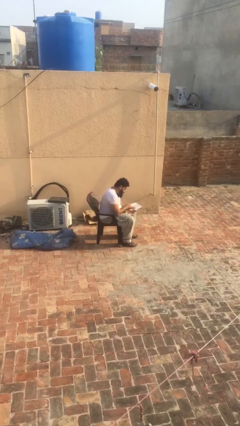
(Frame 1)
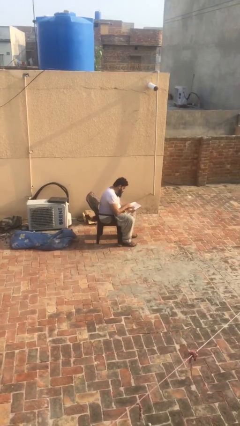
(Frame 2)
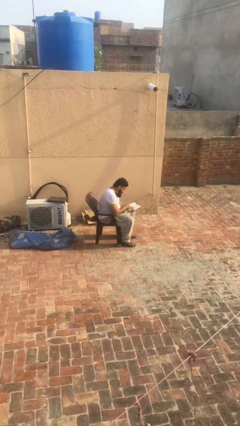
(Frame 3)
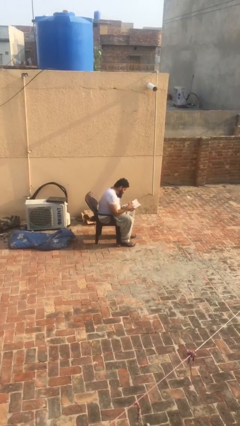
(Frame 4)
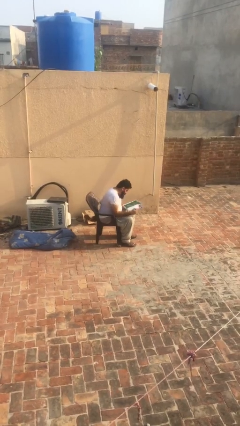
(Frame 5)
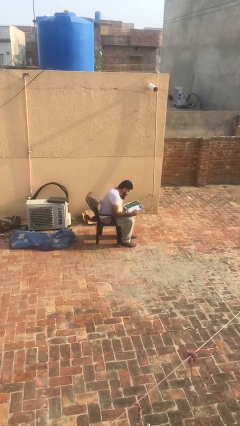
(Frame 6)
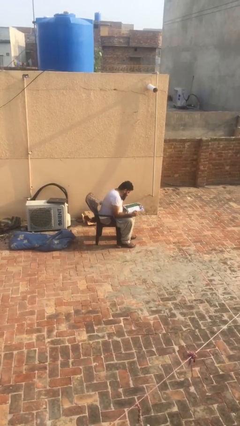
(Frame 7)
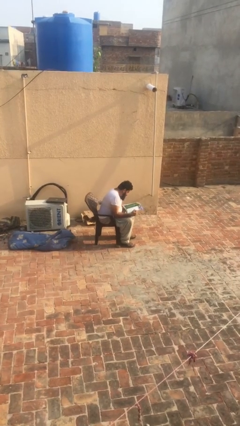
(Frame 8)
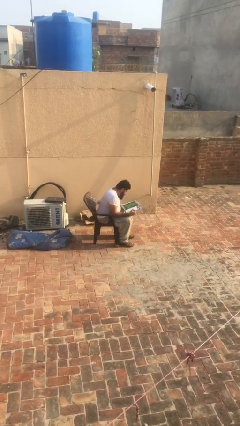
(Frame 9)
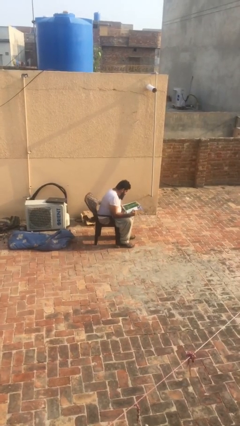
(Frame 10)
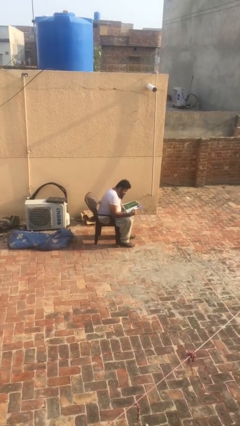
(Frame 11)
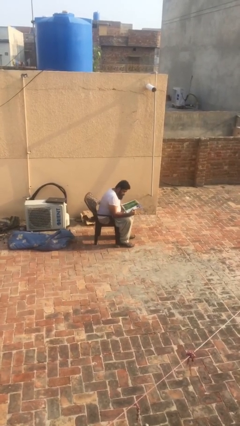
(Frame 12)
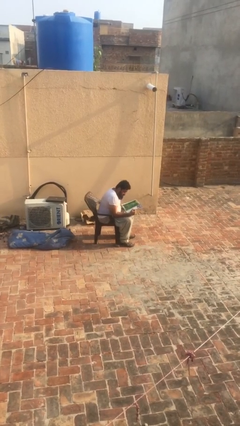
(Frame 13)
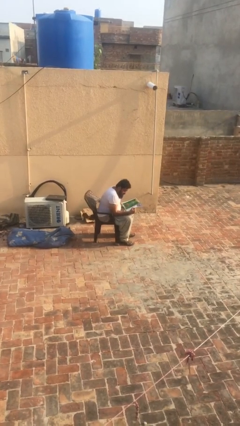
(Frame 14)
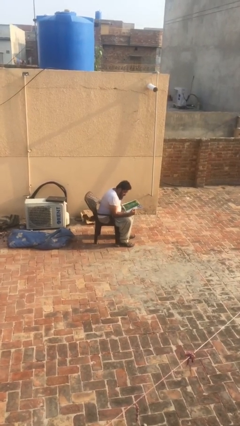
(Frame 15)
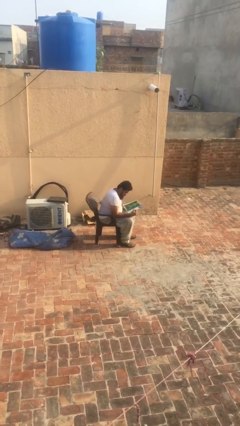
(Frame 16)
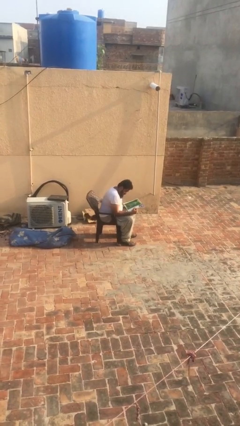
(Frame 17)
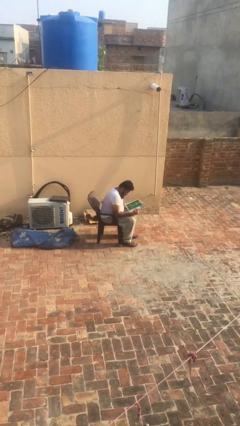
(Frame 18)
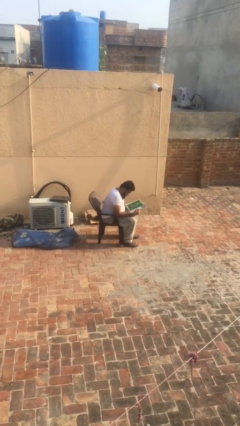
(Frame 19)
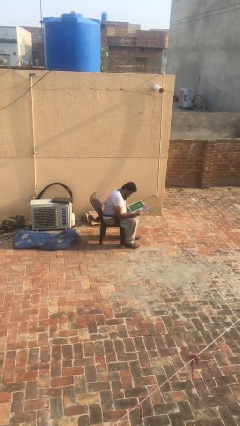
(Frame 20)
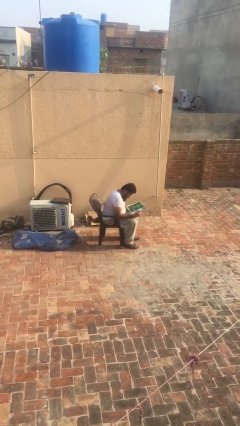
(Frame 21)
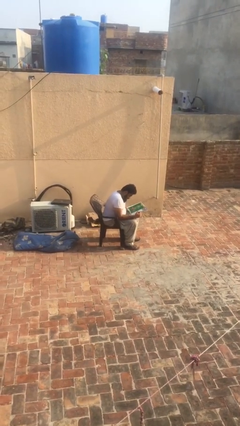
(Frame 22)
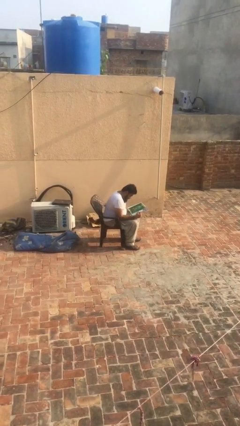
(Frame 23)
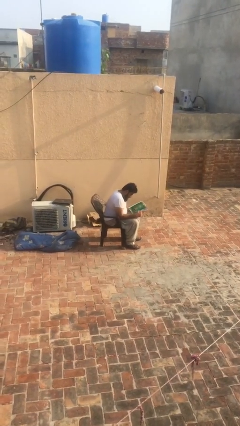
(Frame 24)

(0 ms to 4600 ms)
person reads document

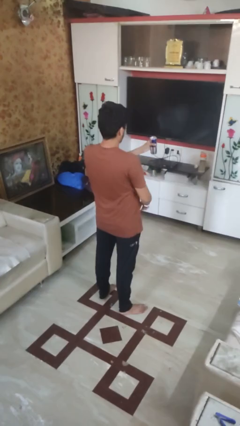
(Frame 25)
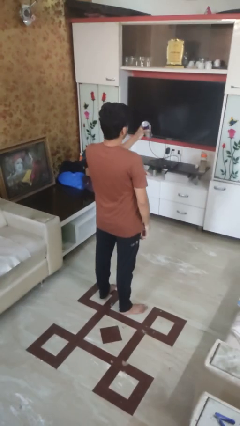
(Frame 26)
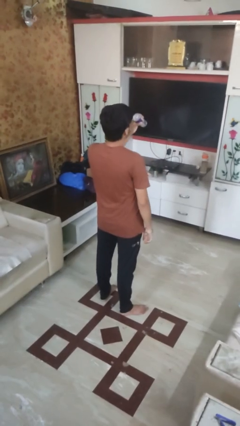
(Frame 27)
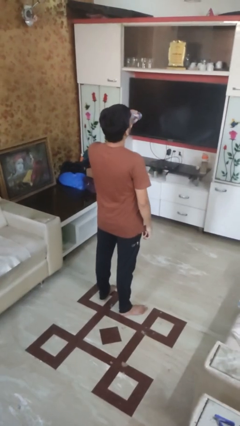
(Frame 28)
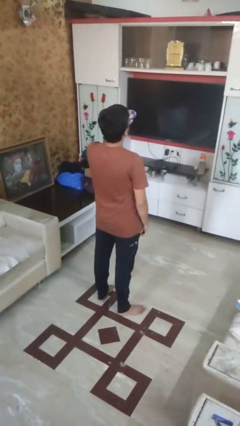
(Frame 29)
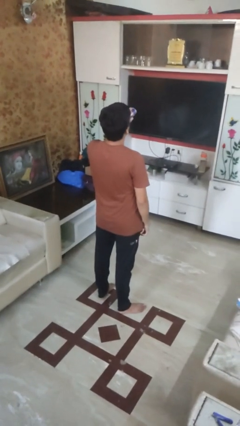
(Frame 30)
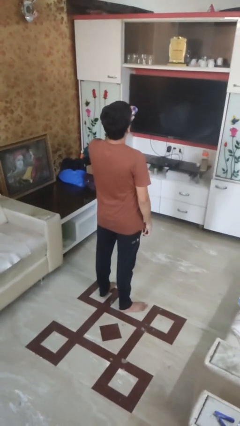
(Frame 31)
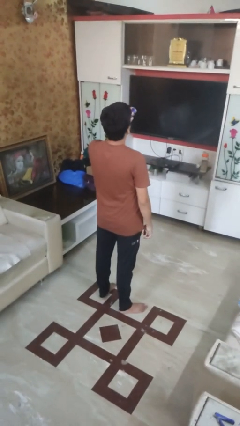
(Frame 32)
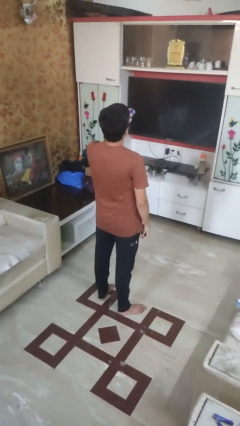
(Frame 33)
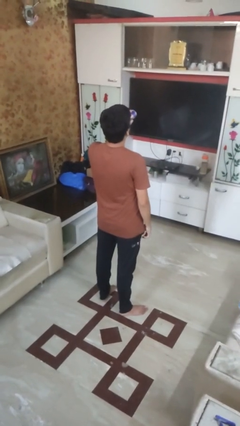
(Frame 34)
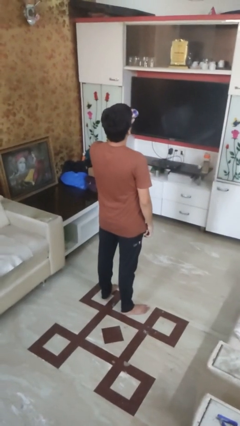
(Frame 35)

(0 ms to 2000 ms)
person drinks from beverage can

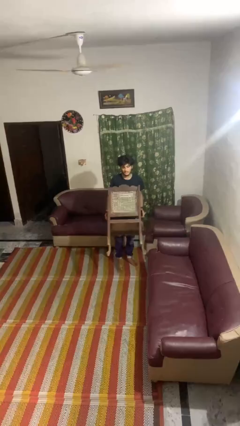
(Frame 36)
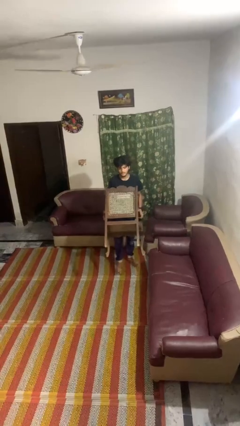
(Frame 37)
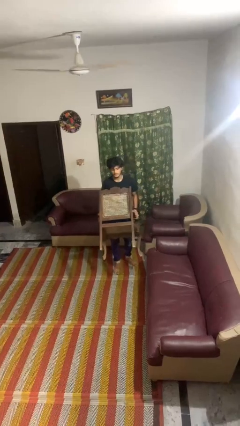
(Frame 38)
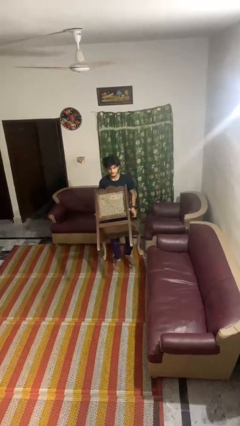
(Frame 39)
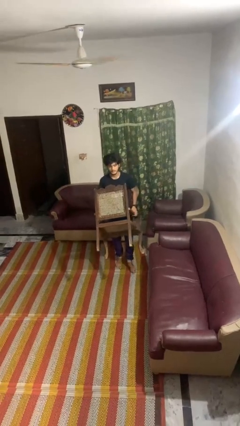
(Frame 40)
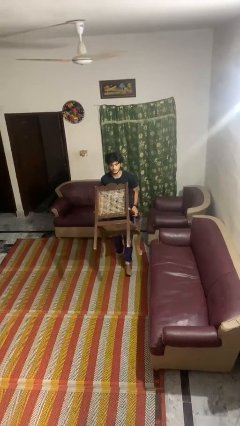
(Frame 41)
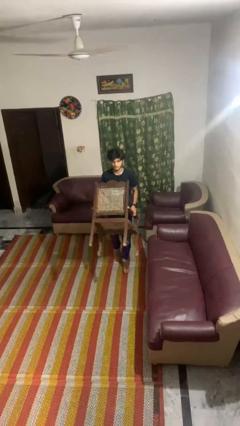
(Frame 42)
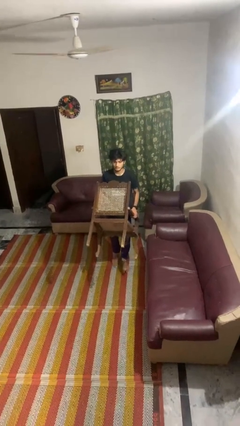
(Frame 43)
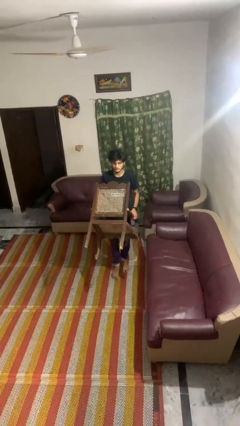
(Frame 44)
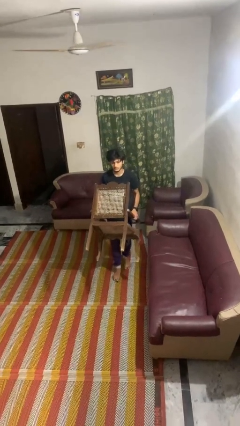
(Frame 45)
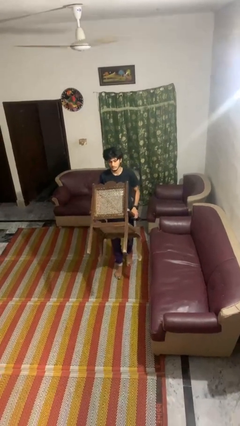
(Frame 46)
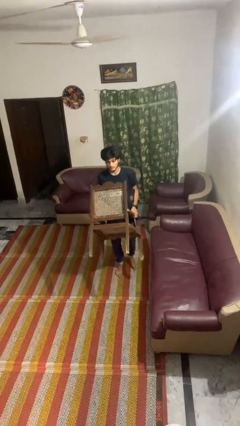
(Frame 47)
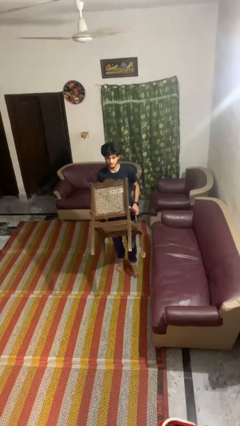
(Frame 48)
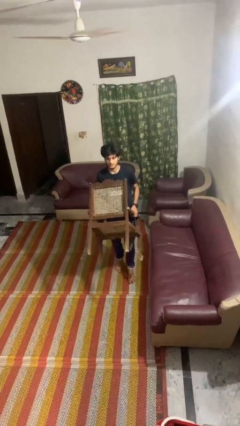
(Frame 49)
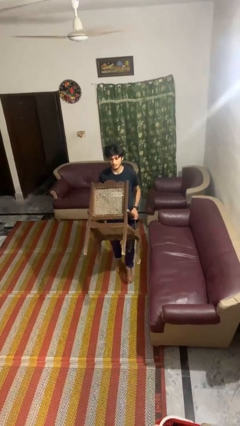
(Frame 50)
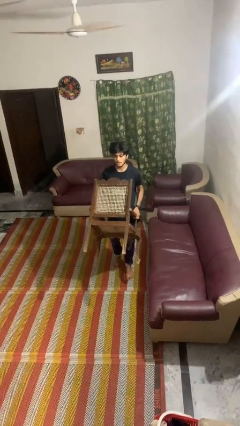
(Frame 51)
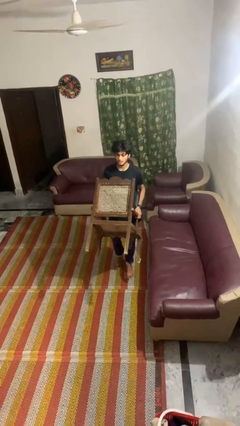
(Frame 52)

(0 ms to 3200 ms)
person carries furniture

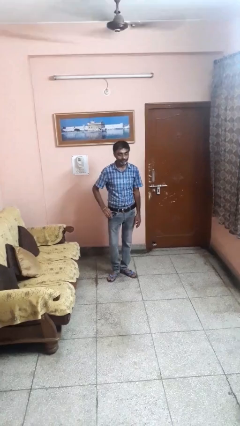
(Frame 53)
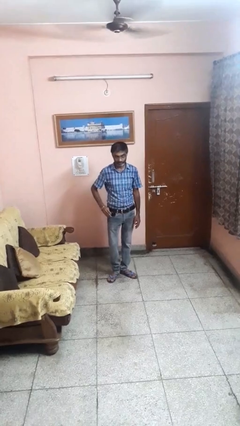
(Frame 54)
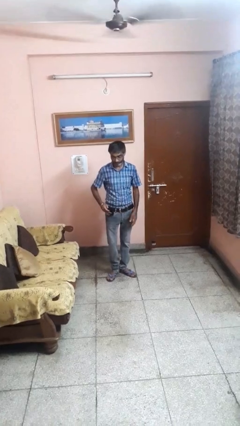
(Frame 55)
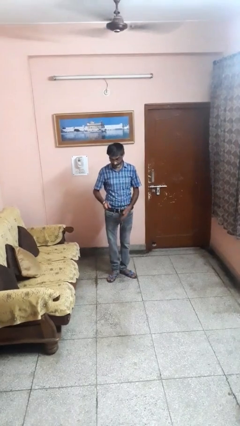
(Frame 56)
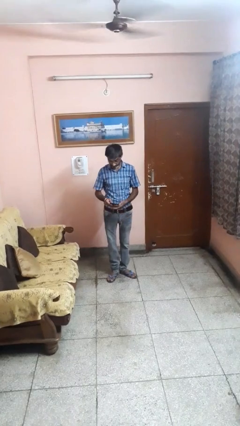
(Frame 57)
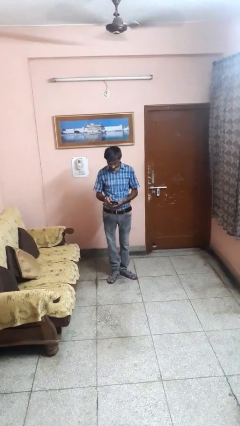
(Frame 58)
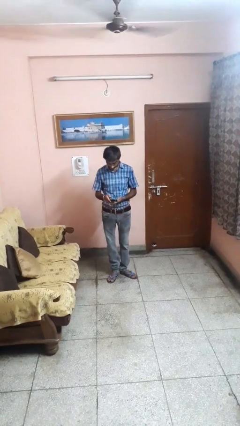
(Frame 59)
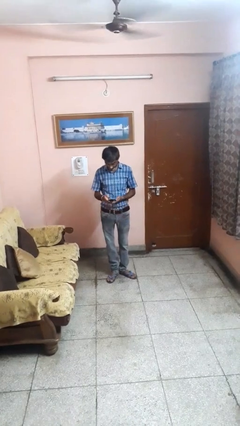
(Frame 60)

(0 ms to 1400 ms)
person takes phone from pocket

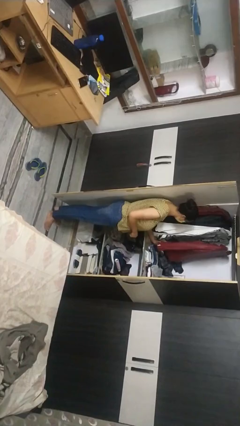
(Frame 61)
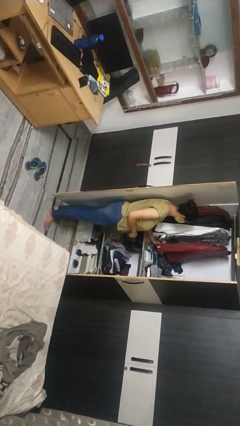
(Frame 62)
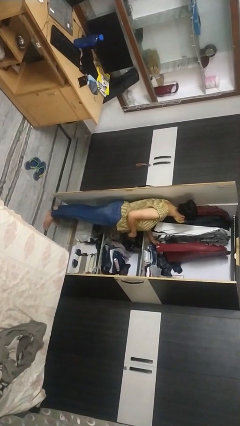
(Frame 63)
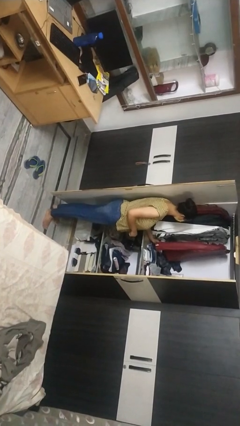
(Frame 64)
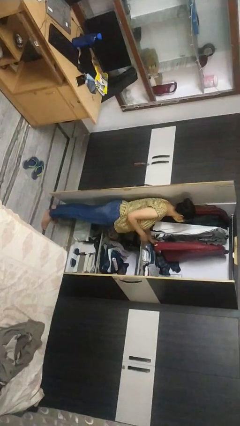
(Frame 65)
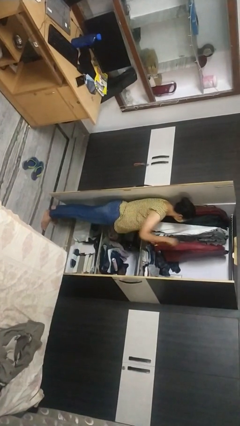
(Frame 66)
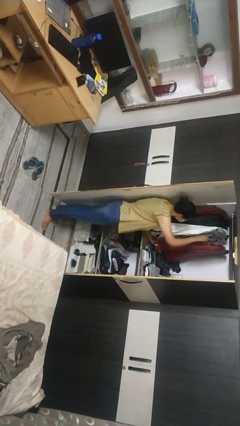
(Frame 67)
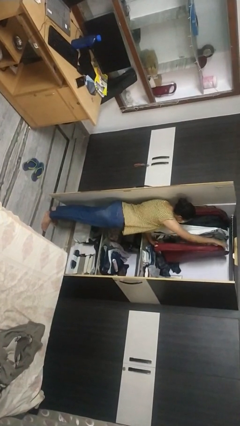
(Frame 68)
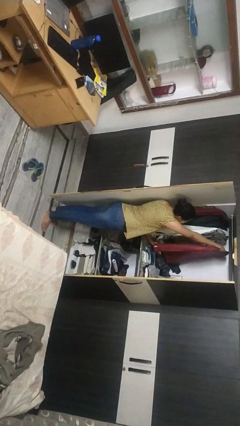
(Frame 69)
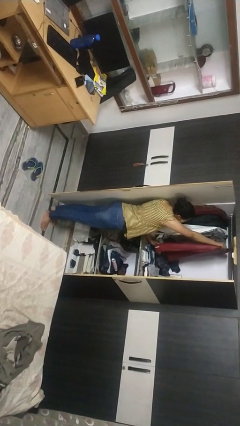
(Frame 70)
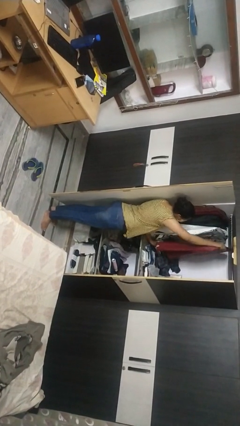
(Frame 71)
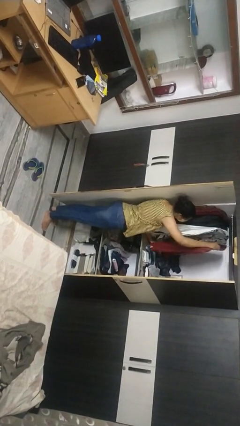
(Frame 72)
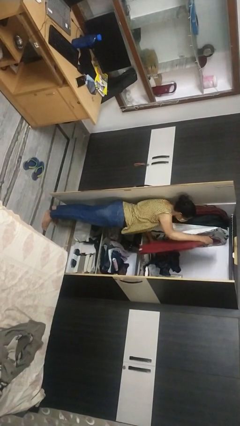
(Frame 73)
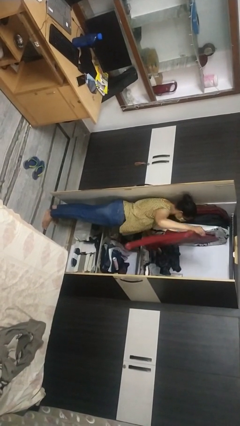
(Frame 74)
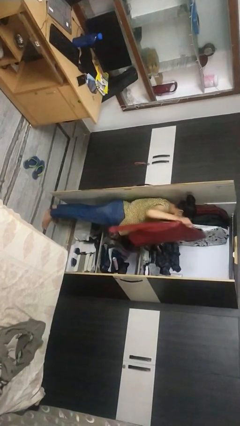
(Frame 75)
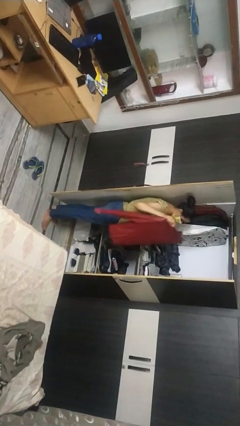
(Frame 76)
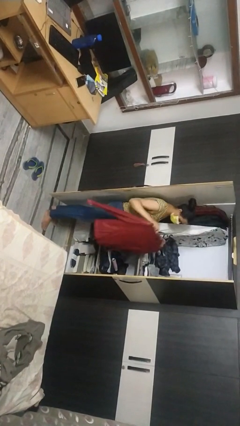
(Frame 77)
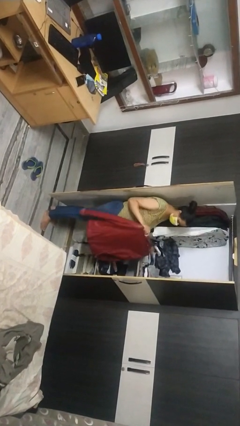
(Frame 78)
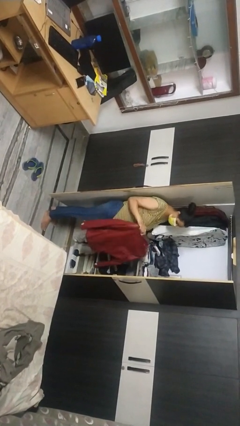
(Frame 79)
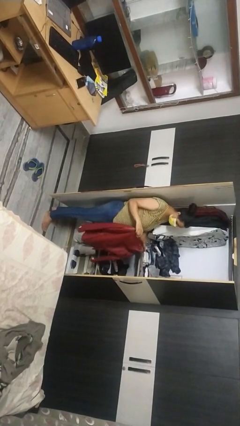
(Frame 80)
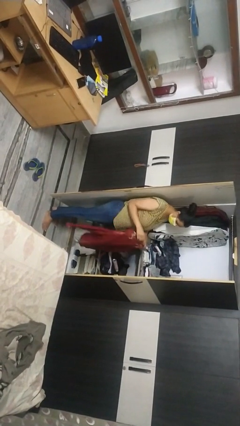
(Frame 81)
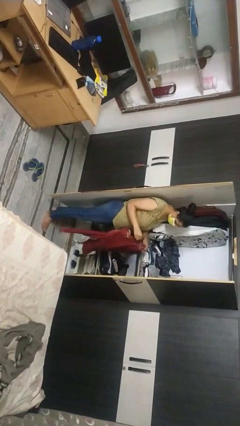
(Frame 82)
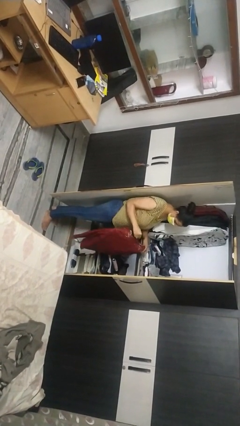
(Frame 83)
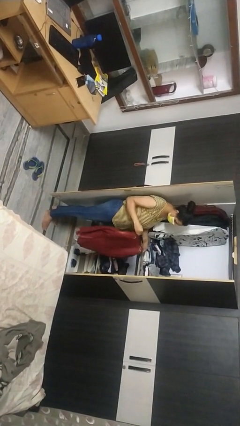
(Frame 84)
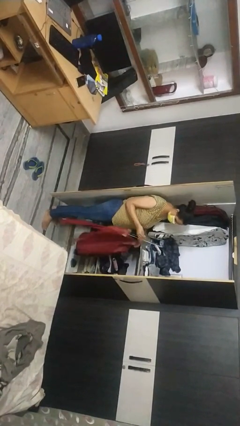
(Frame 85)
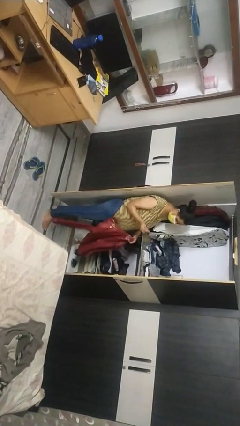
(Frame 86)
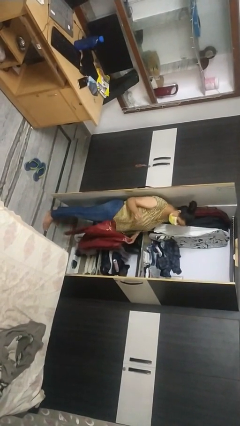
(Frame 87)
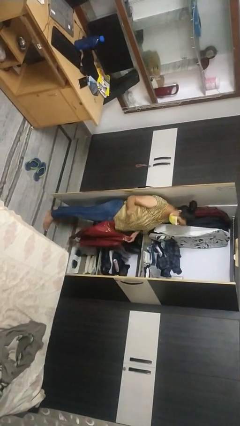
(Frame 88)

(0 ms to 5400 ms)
person takes clothes from closet

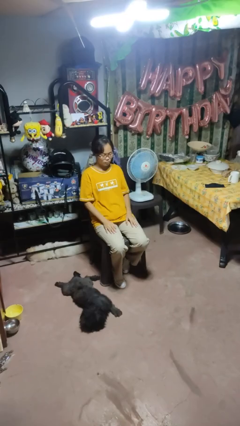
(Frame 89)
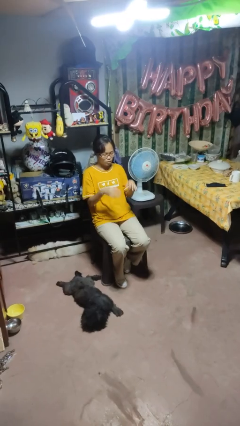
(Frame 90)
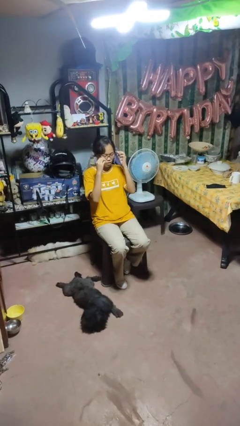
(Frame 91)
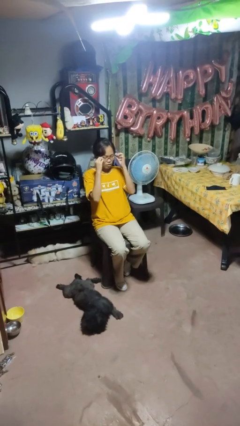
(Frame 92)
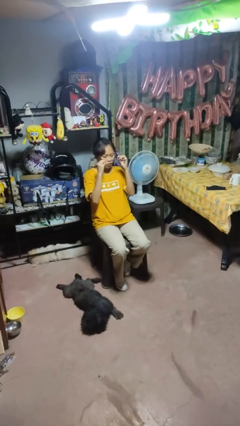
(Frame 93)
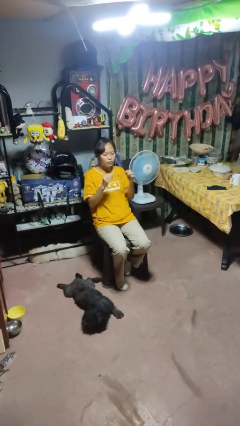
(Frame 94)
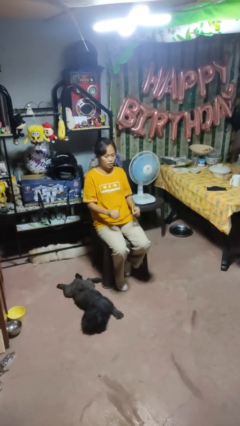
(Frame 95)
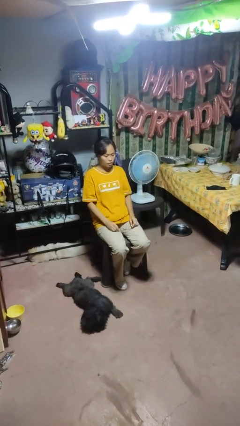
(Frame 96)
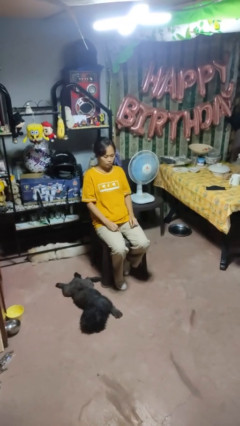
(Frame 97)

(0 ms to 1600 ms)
person takes off glasses
